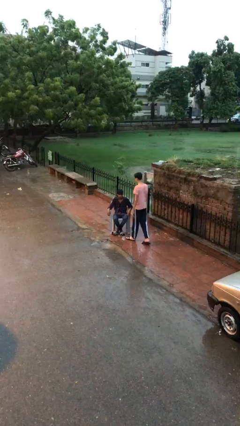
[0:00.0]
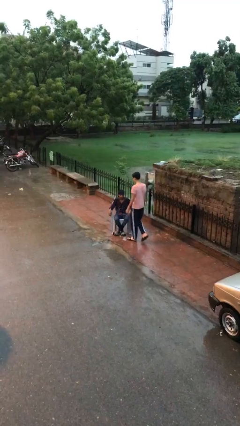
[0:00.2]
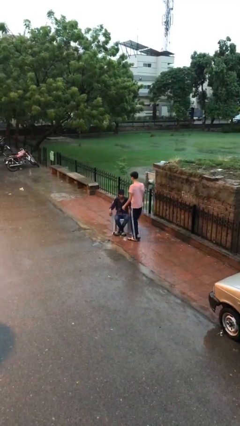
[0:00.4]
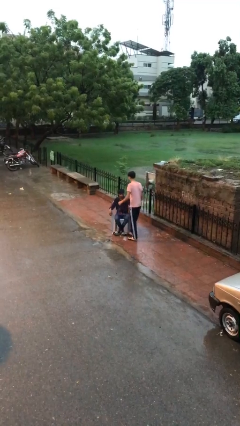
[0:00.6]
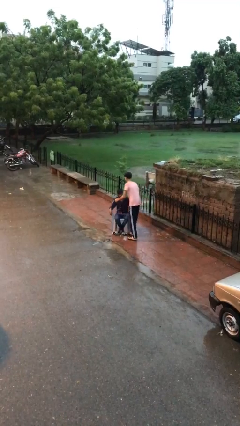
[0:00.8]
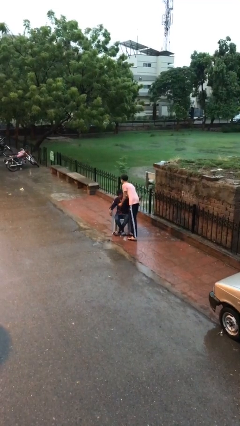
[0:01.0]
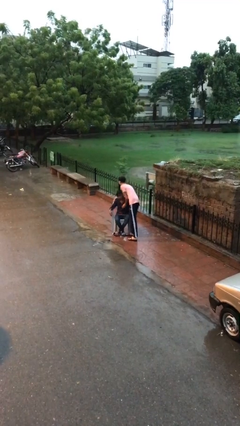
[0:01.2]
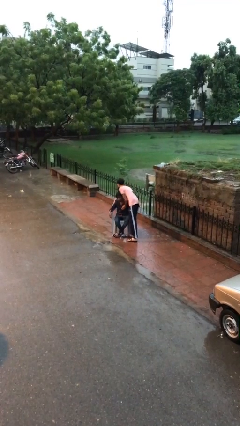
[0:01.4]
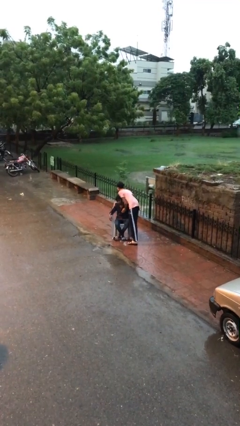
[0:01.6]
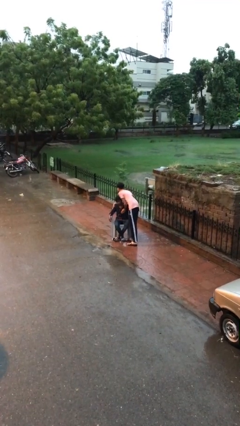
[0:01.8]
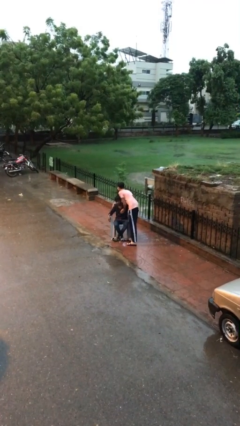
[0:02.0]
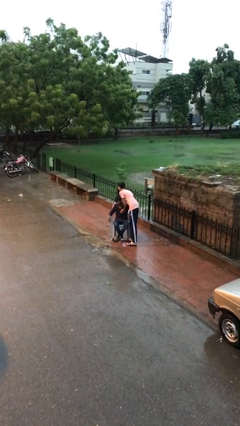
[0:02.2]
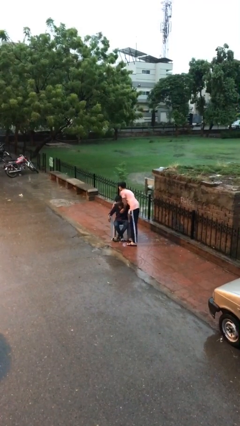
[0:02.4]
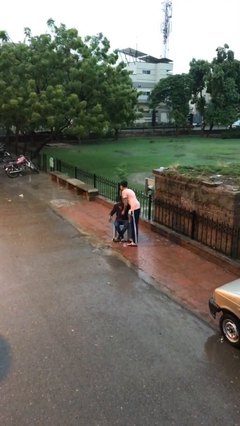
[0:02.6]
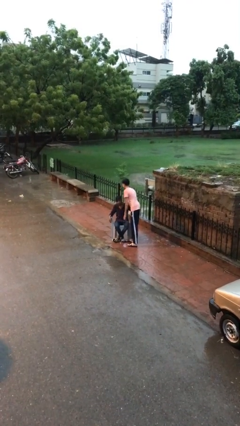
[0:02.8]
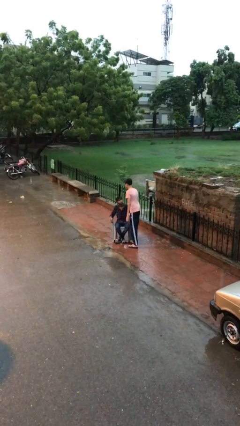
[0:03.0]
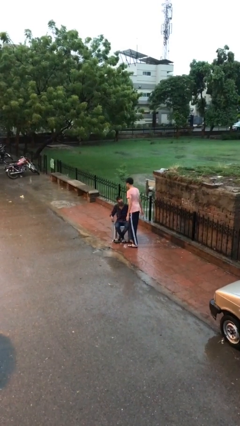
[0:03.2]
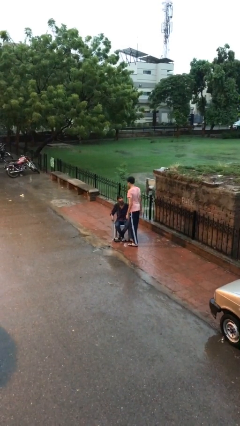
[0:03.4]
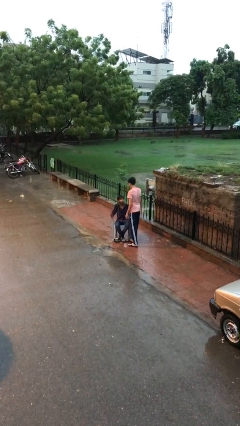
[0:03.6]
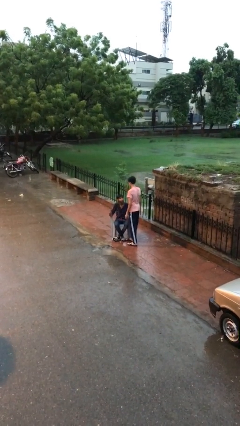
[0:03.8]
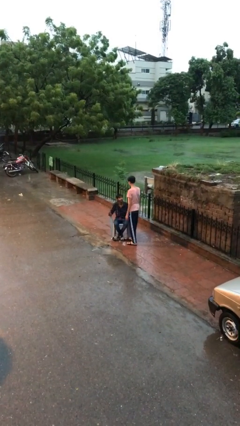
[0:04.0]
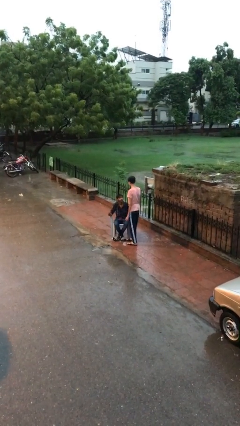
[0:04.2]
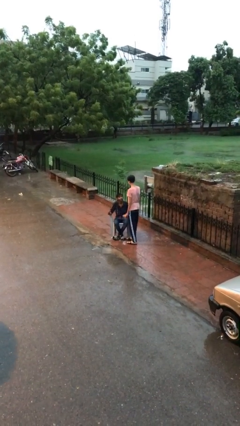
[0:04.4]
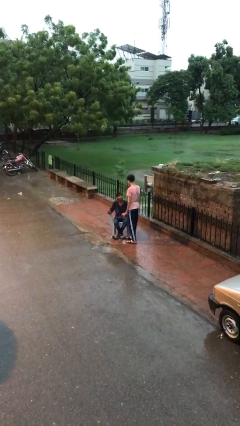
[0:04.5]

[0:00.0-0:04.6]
person embraces person

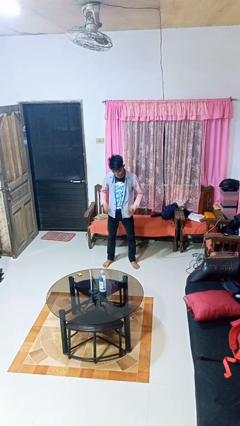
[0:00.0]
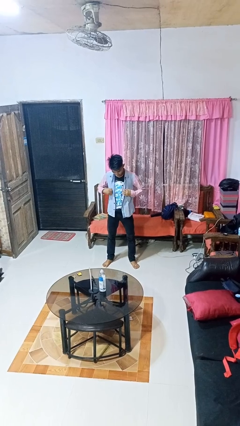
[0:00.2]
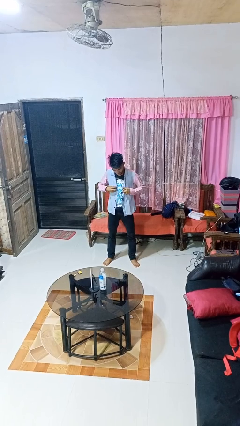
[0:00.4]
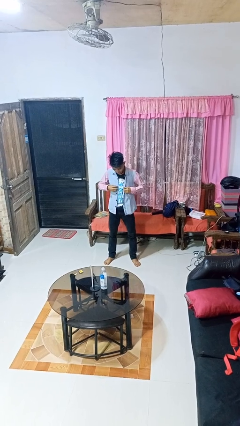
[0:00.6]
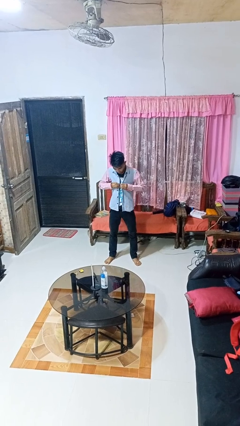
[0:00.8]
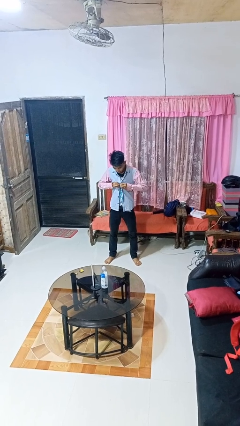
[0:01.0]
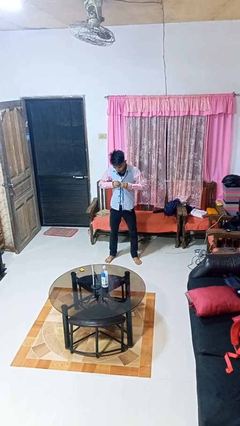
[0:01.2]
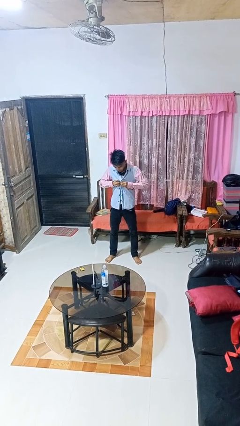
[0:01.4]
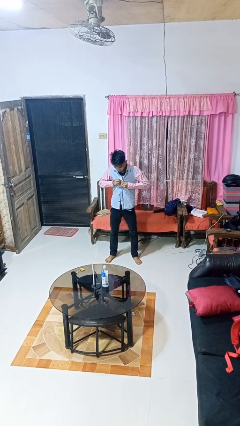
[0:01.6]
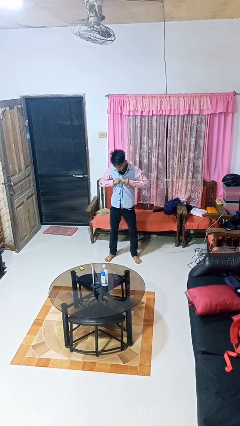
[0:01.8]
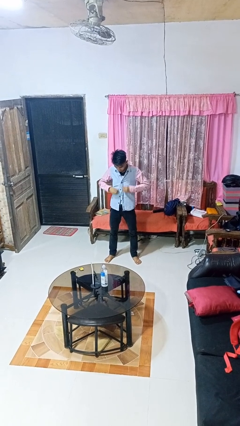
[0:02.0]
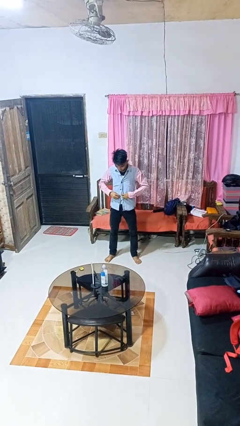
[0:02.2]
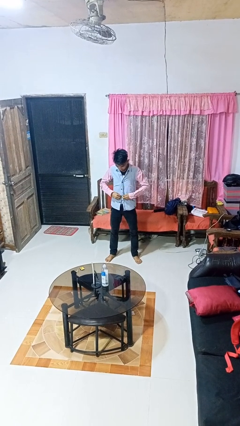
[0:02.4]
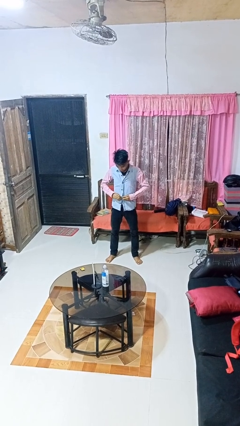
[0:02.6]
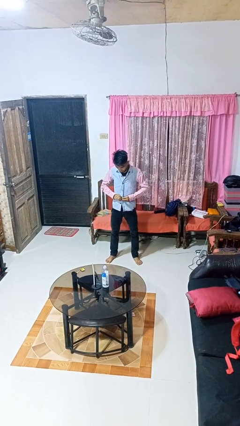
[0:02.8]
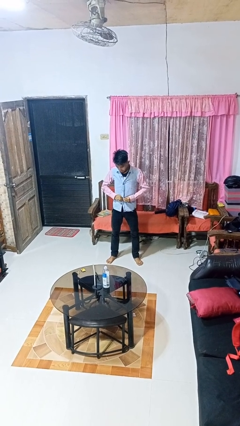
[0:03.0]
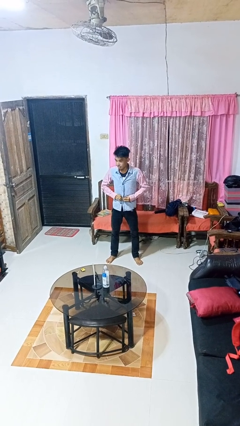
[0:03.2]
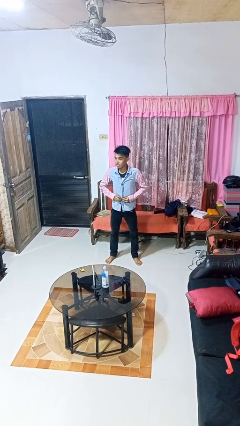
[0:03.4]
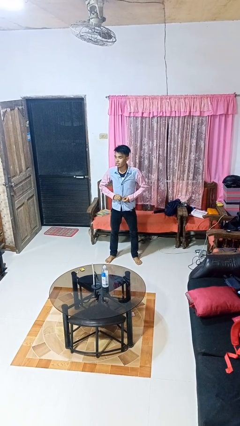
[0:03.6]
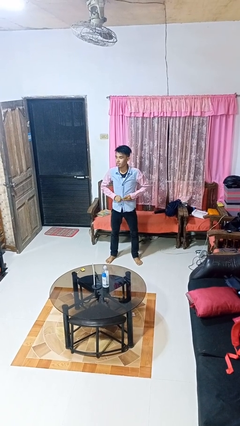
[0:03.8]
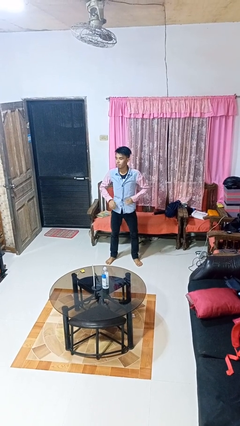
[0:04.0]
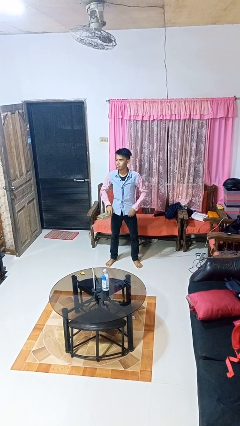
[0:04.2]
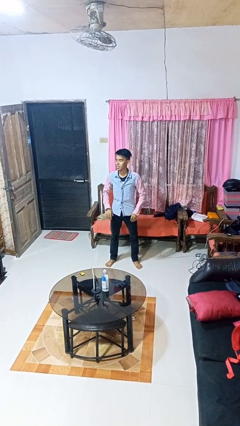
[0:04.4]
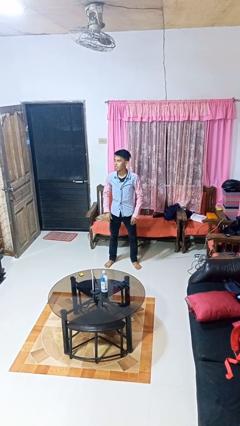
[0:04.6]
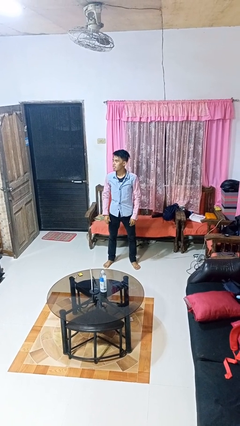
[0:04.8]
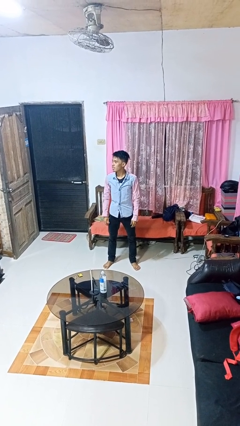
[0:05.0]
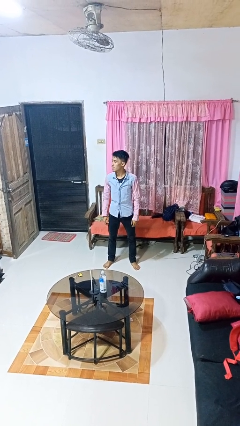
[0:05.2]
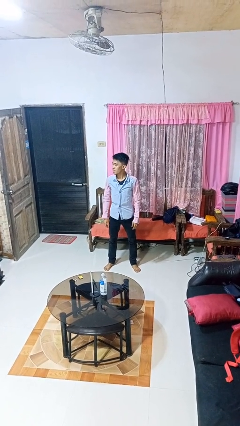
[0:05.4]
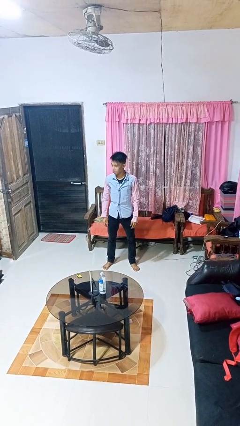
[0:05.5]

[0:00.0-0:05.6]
person buttons shirt

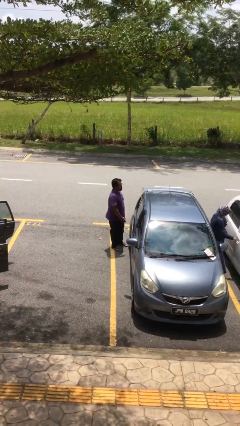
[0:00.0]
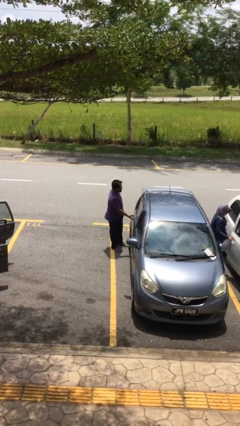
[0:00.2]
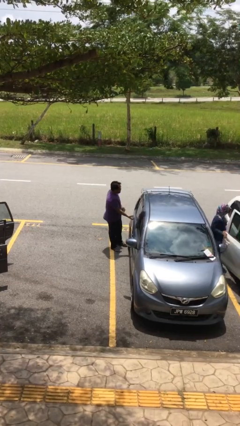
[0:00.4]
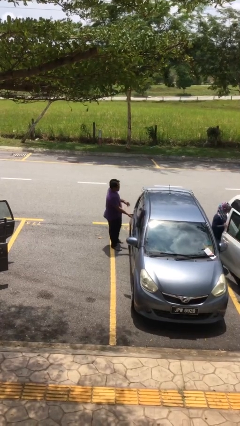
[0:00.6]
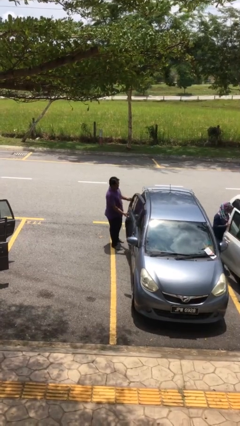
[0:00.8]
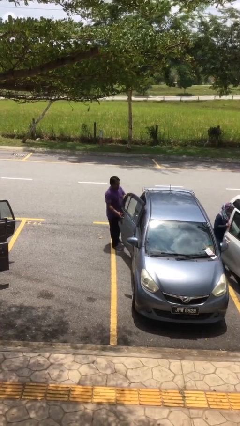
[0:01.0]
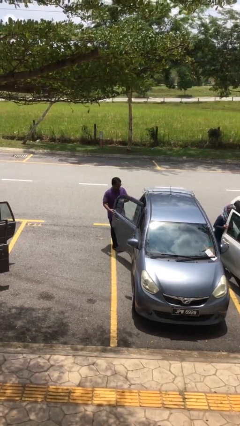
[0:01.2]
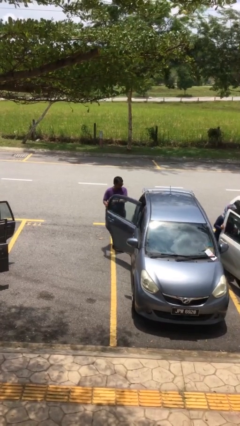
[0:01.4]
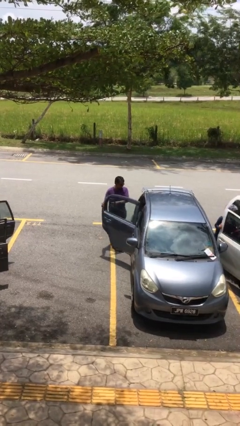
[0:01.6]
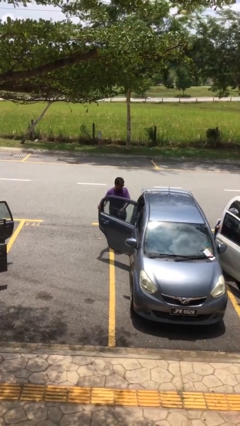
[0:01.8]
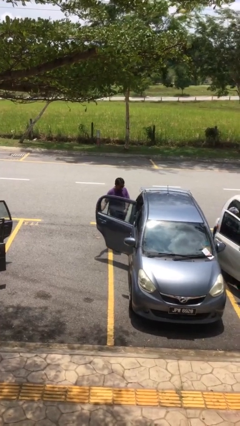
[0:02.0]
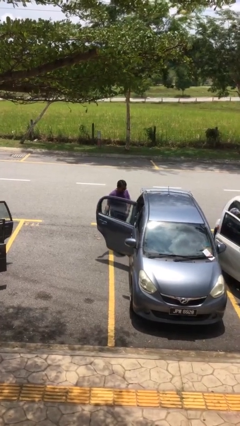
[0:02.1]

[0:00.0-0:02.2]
person opens car door

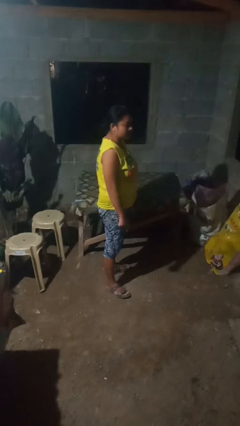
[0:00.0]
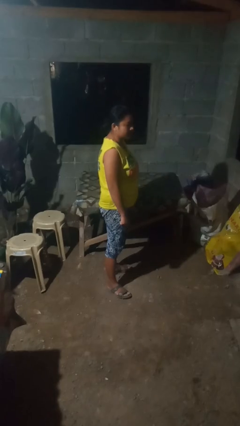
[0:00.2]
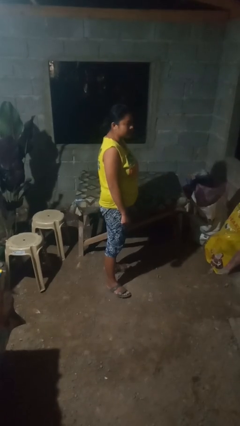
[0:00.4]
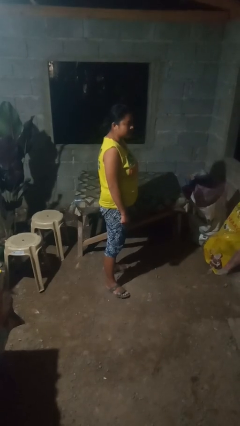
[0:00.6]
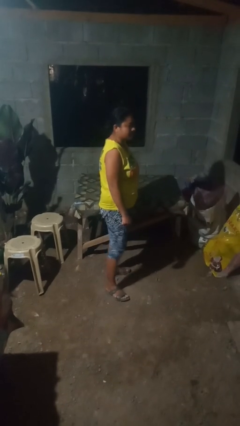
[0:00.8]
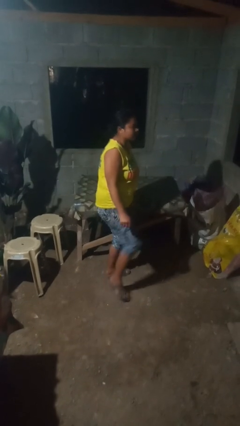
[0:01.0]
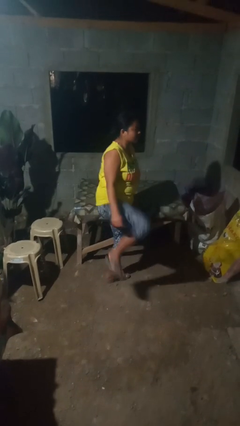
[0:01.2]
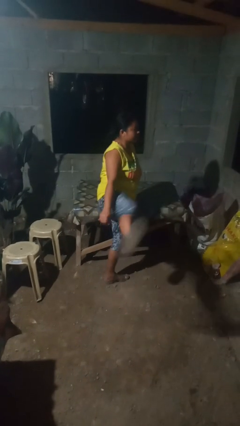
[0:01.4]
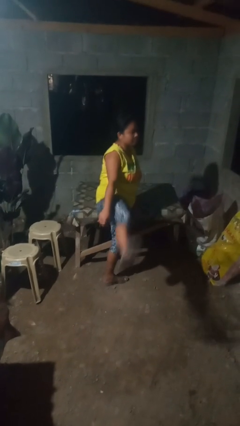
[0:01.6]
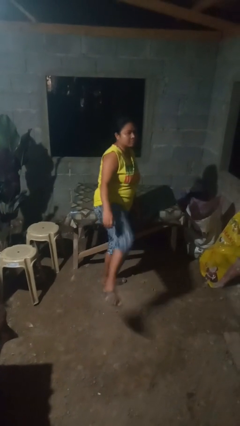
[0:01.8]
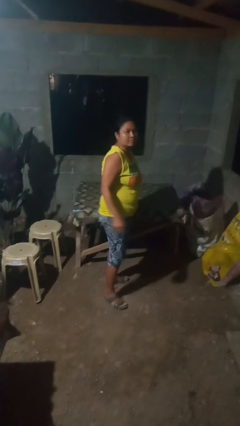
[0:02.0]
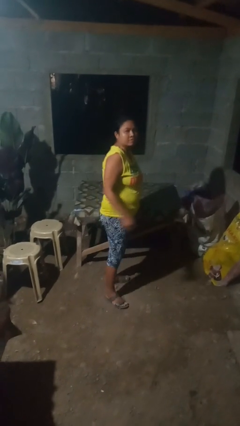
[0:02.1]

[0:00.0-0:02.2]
person karate kicks

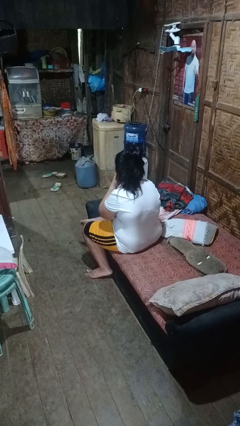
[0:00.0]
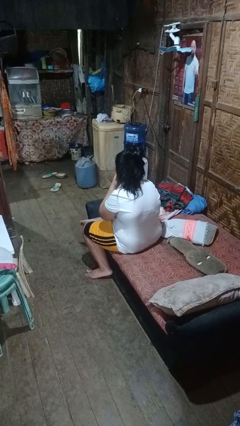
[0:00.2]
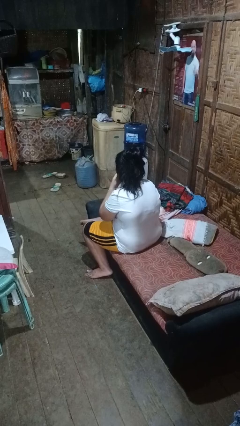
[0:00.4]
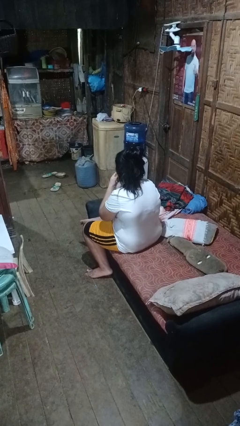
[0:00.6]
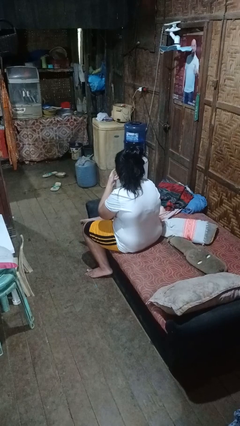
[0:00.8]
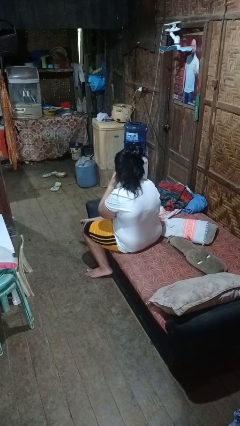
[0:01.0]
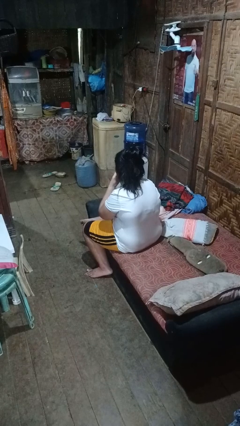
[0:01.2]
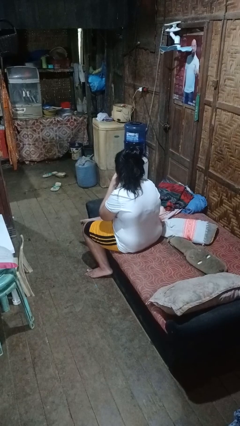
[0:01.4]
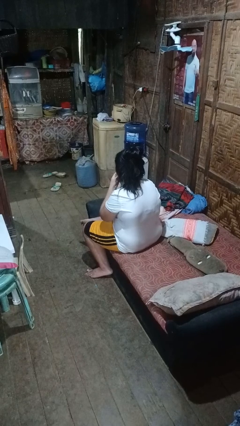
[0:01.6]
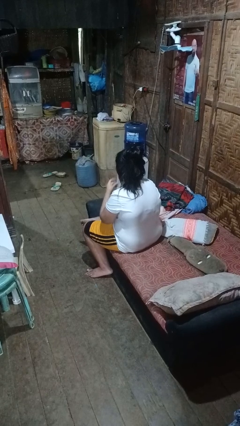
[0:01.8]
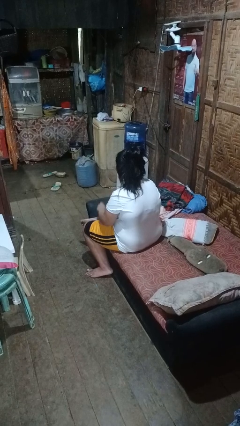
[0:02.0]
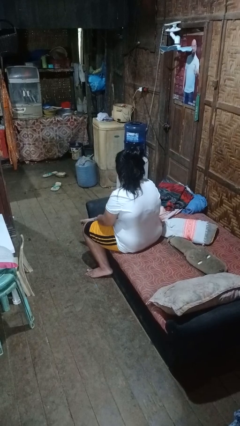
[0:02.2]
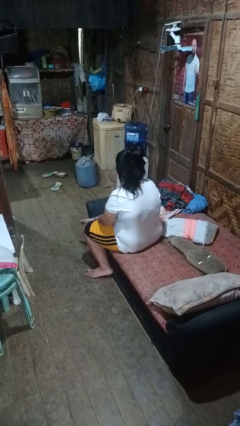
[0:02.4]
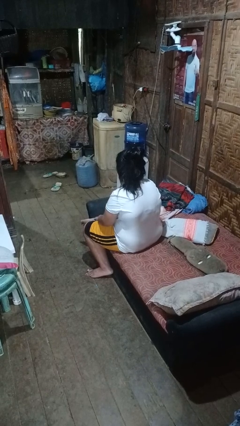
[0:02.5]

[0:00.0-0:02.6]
person strokes chin

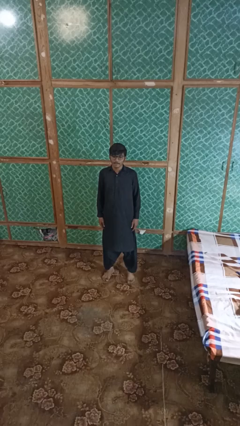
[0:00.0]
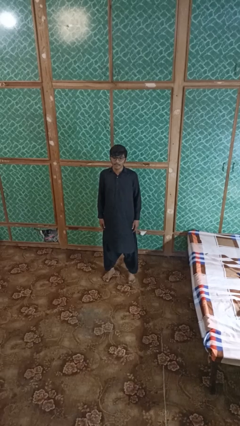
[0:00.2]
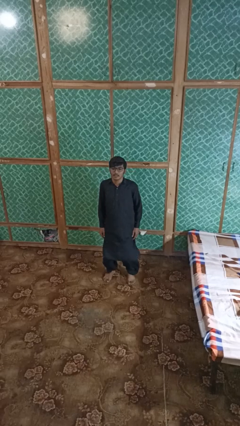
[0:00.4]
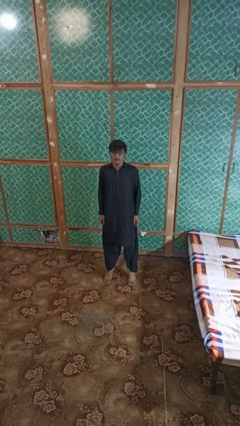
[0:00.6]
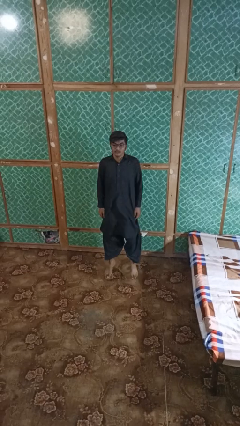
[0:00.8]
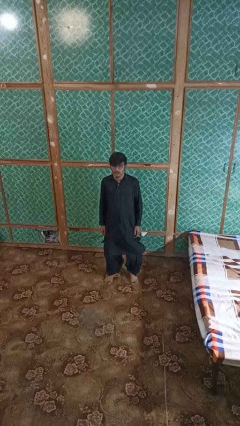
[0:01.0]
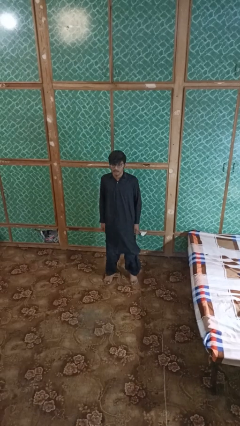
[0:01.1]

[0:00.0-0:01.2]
person jumps
